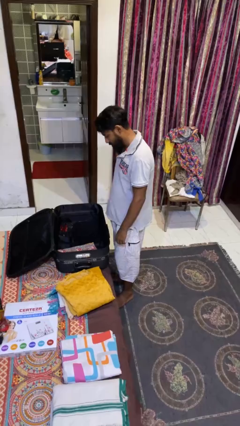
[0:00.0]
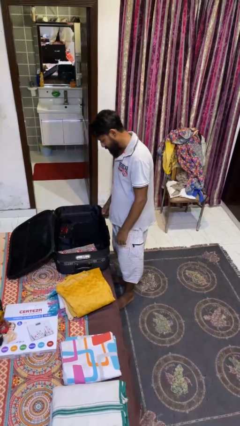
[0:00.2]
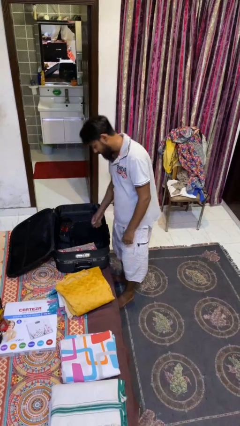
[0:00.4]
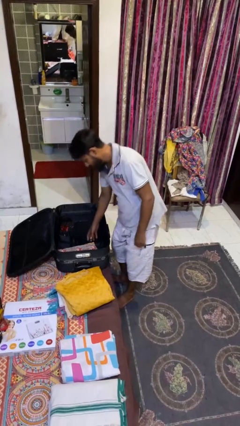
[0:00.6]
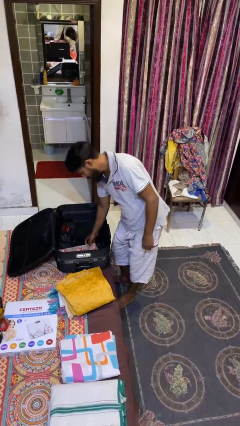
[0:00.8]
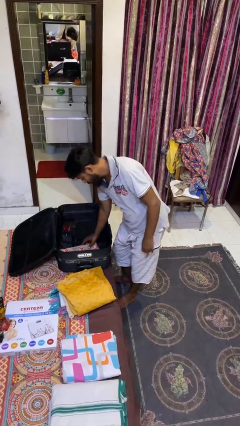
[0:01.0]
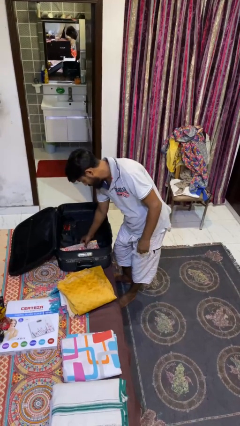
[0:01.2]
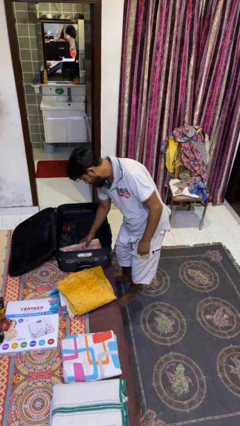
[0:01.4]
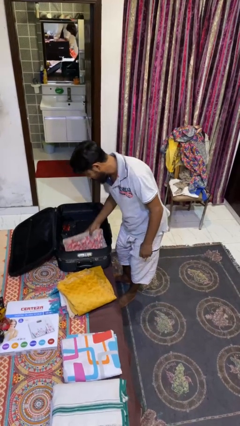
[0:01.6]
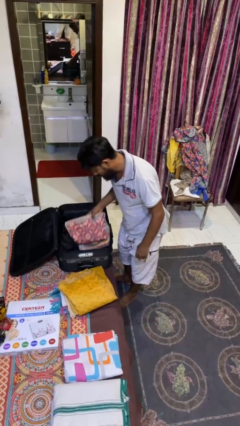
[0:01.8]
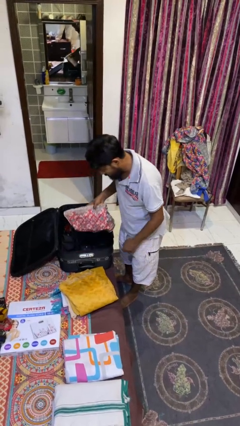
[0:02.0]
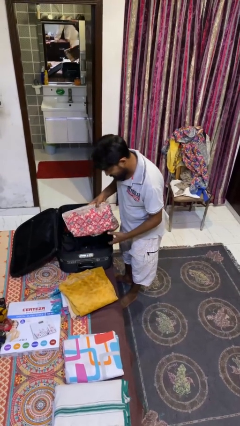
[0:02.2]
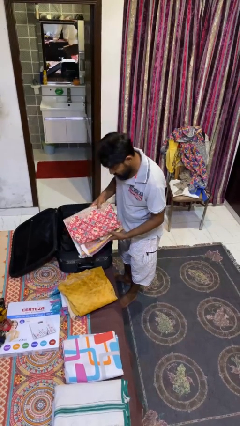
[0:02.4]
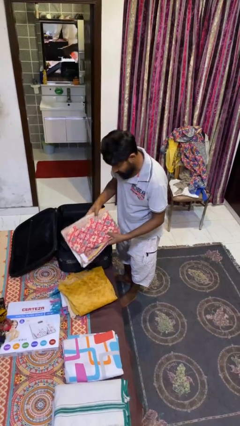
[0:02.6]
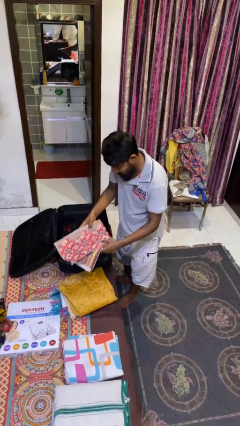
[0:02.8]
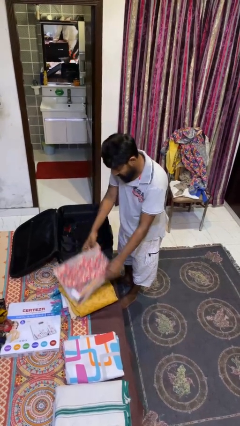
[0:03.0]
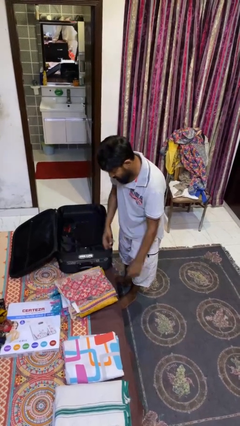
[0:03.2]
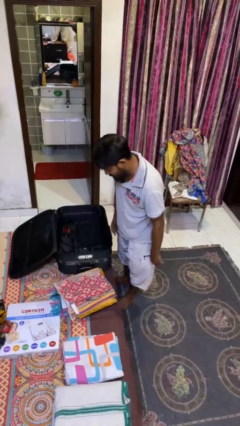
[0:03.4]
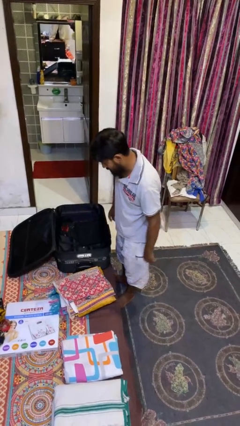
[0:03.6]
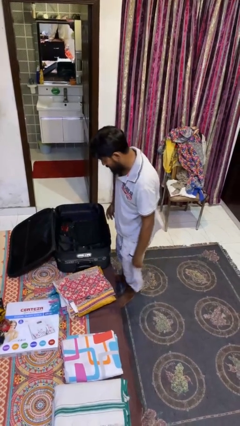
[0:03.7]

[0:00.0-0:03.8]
person unloads clothes from suitcase

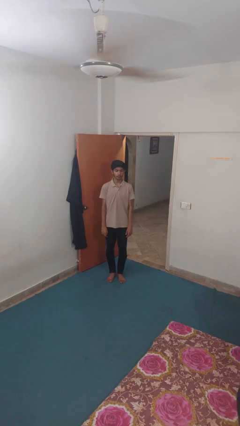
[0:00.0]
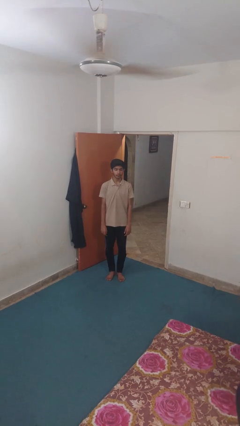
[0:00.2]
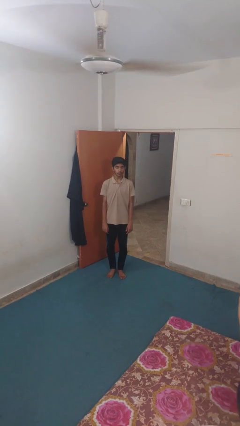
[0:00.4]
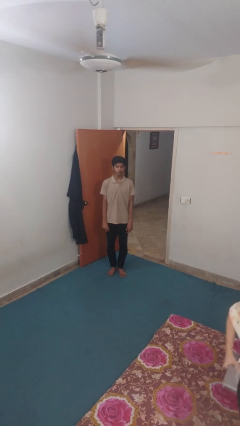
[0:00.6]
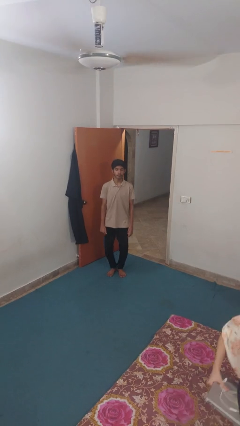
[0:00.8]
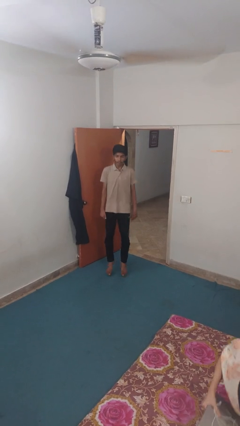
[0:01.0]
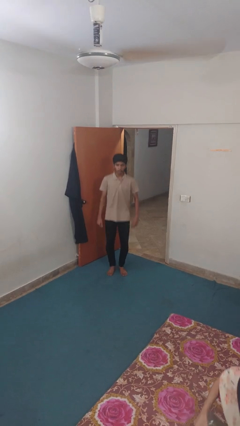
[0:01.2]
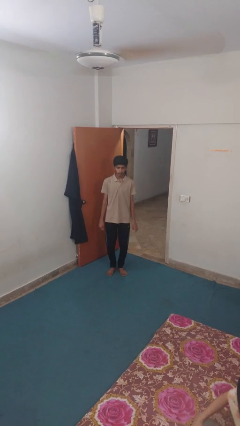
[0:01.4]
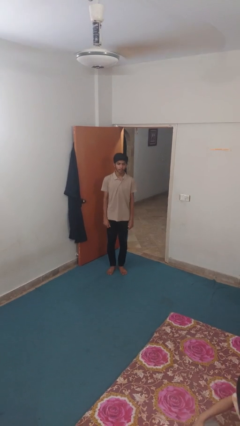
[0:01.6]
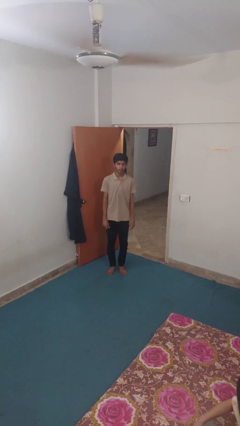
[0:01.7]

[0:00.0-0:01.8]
person jumps

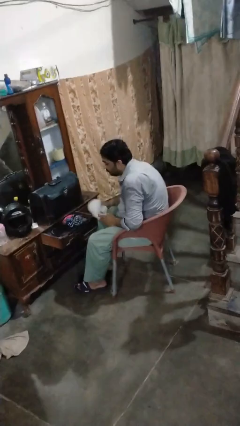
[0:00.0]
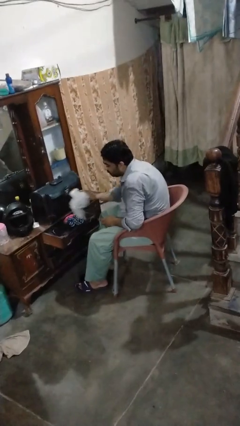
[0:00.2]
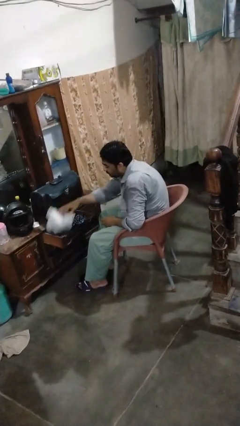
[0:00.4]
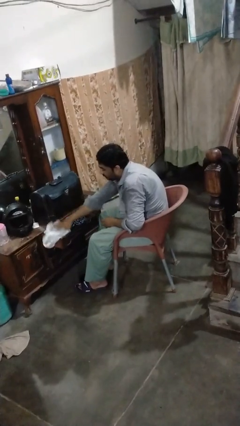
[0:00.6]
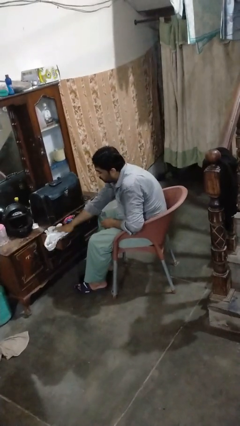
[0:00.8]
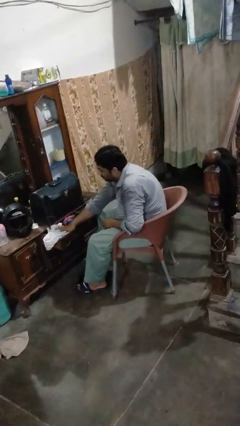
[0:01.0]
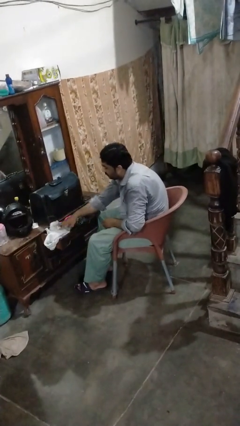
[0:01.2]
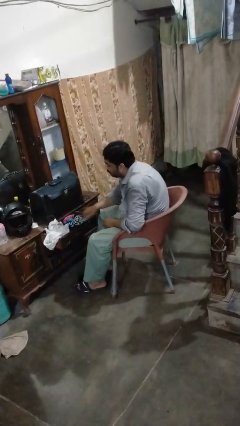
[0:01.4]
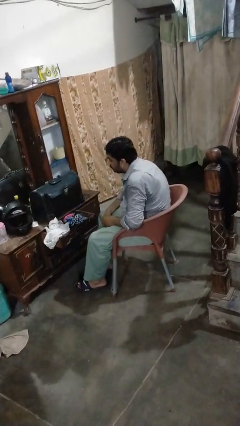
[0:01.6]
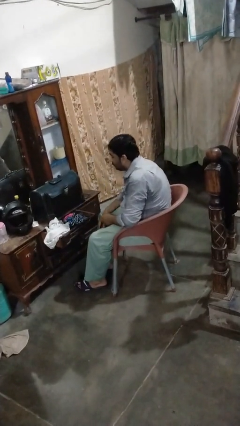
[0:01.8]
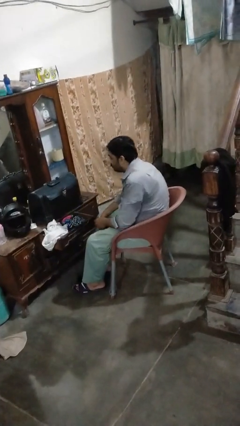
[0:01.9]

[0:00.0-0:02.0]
person puts clothes into dresser

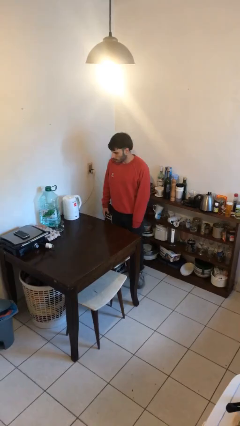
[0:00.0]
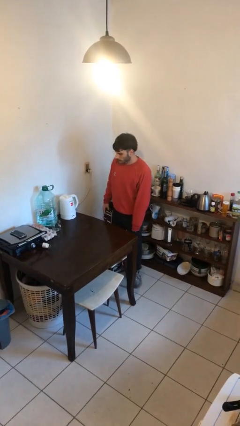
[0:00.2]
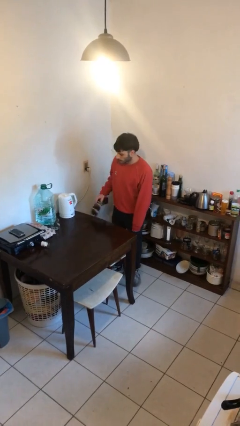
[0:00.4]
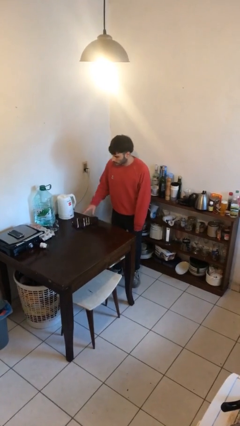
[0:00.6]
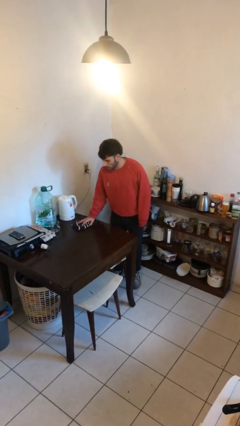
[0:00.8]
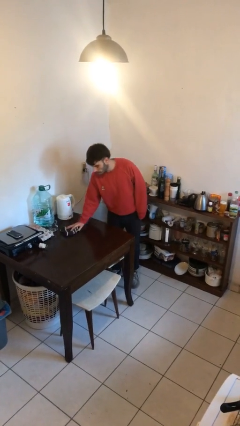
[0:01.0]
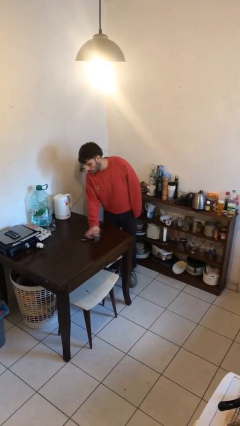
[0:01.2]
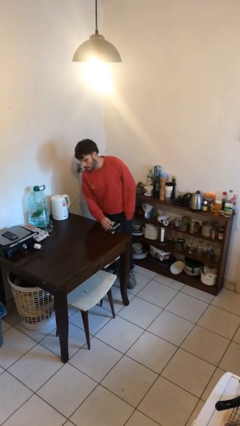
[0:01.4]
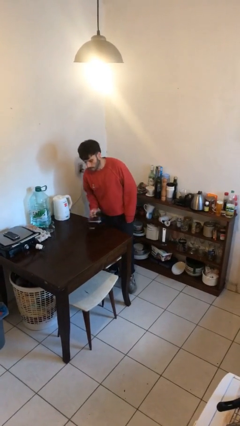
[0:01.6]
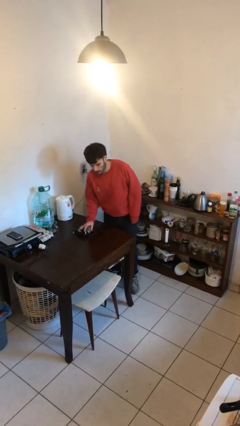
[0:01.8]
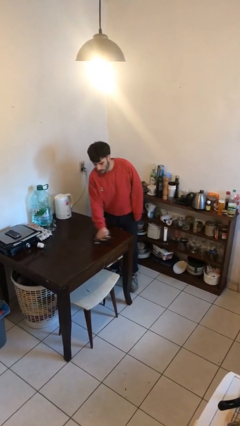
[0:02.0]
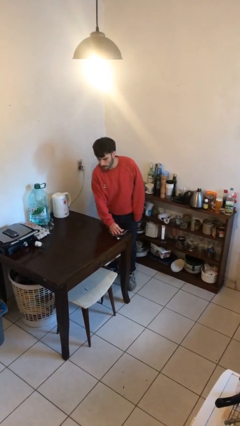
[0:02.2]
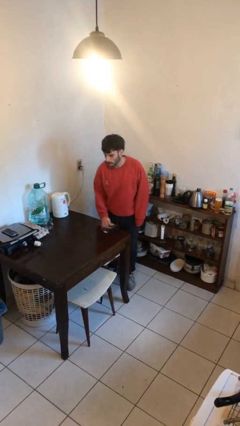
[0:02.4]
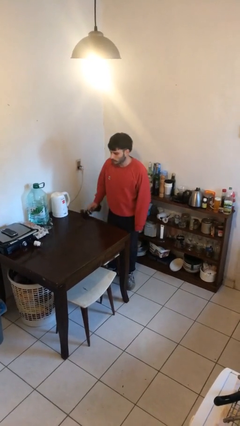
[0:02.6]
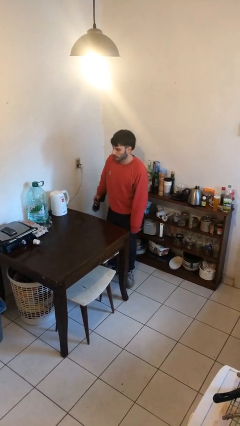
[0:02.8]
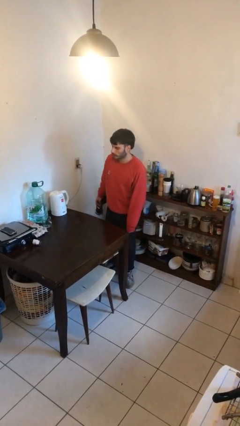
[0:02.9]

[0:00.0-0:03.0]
person cleans table with rag

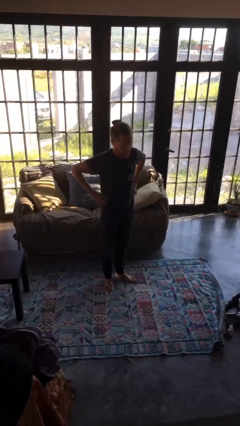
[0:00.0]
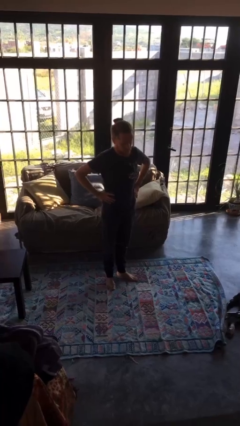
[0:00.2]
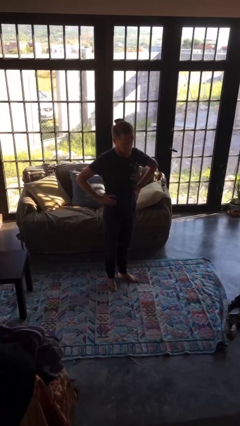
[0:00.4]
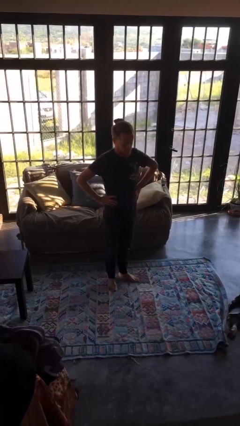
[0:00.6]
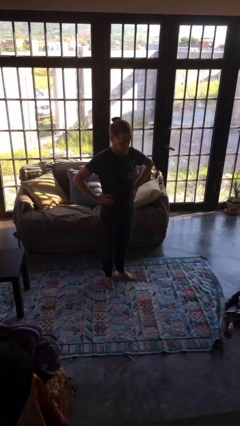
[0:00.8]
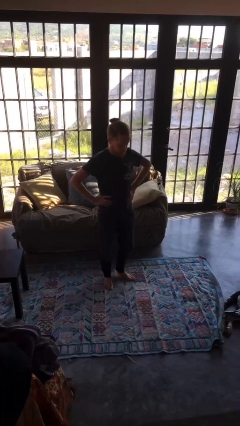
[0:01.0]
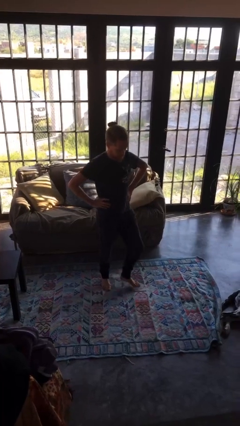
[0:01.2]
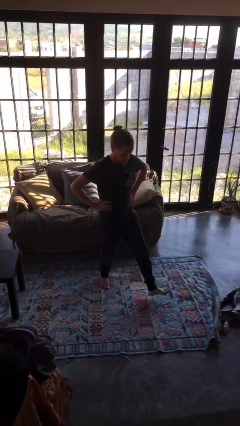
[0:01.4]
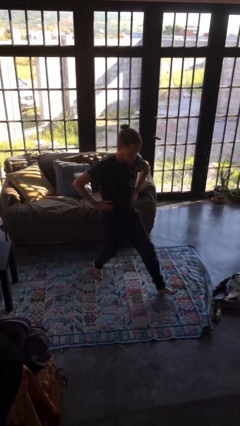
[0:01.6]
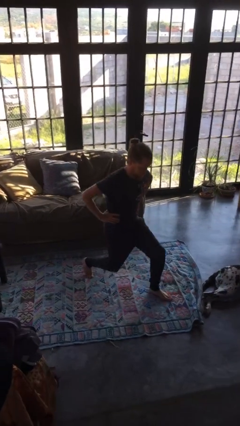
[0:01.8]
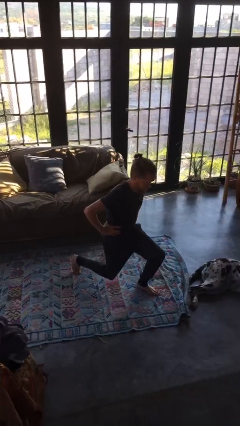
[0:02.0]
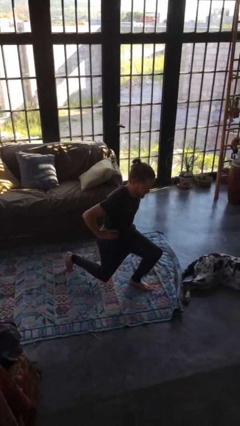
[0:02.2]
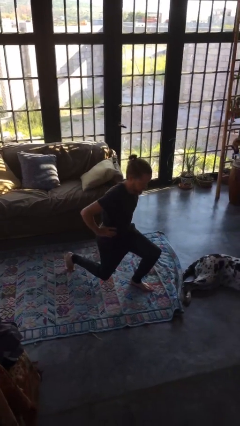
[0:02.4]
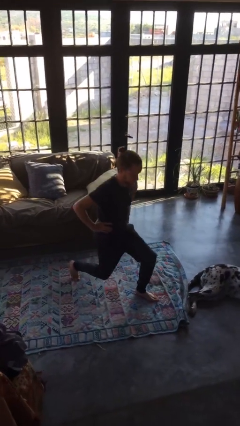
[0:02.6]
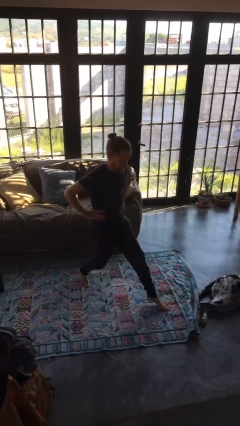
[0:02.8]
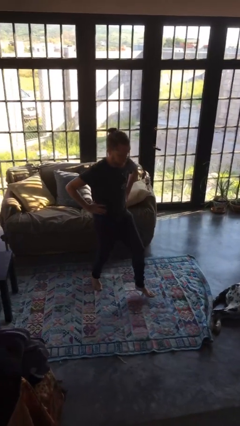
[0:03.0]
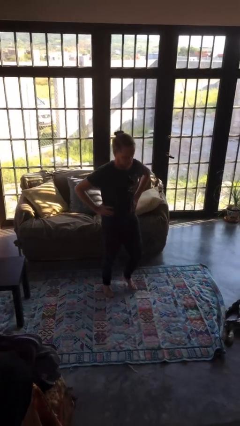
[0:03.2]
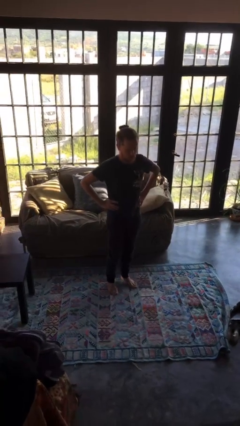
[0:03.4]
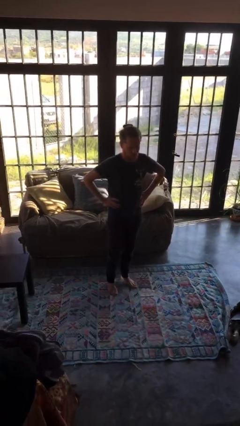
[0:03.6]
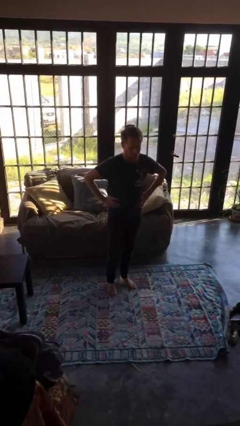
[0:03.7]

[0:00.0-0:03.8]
person exercises with lunges

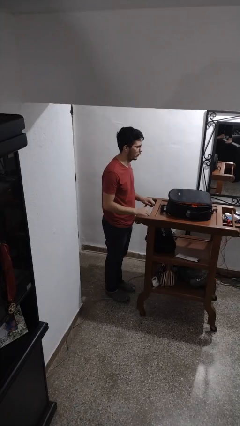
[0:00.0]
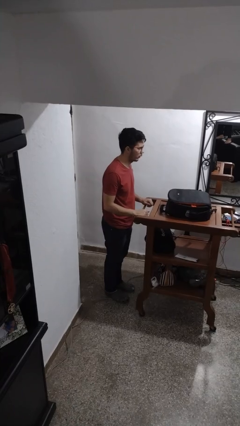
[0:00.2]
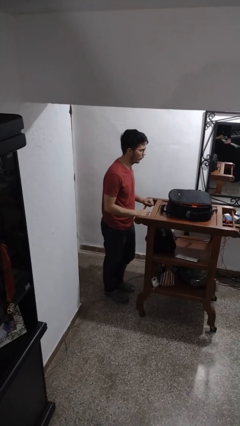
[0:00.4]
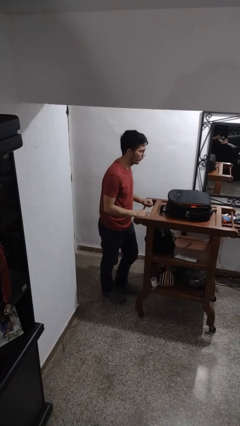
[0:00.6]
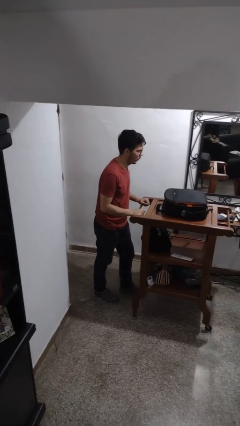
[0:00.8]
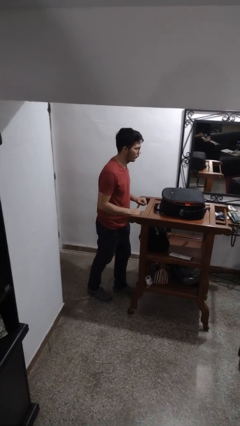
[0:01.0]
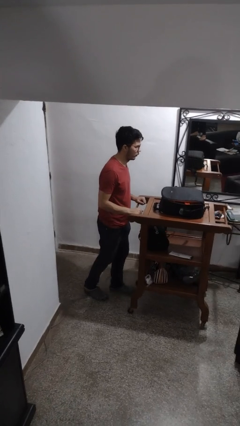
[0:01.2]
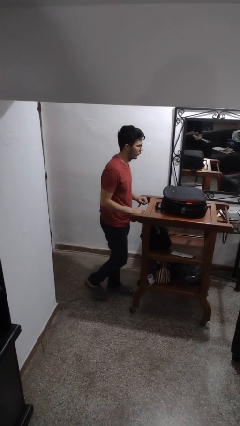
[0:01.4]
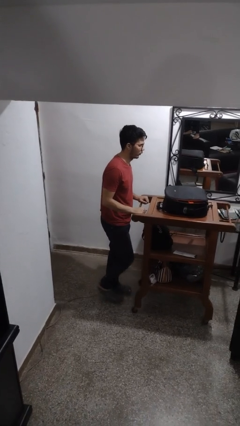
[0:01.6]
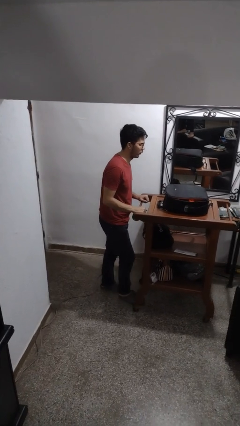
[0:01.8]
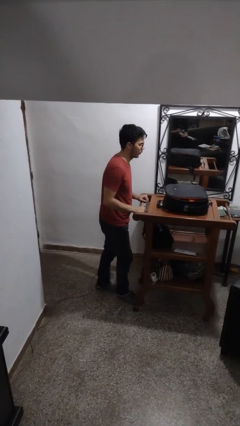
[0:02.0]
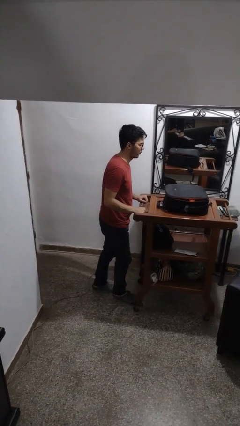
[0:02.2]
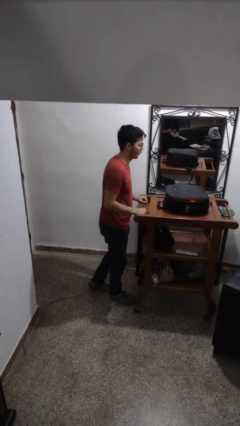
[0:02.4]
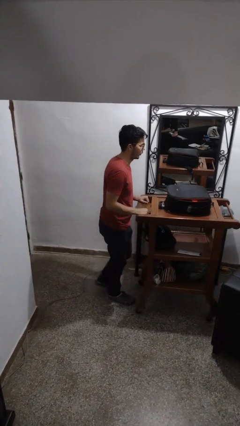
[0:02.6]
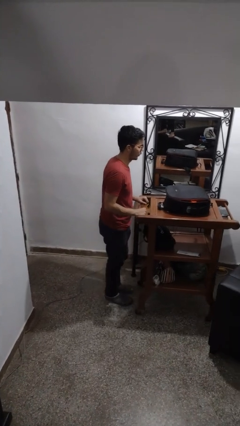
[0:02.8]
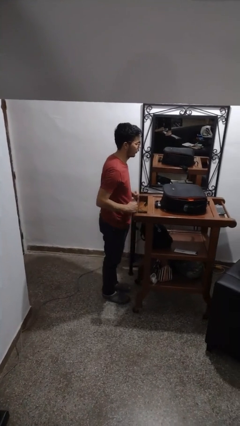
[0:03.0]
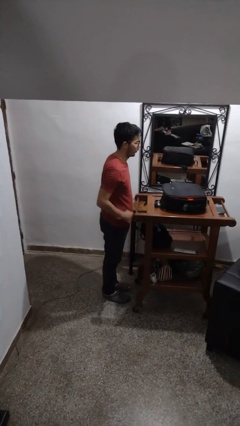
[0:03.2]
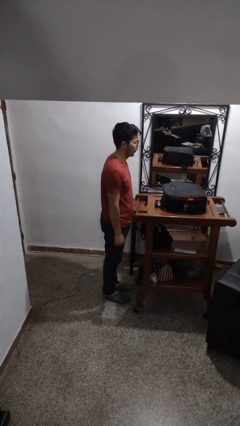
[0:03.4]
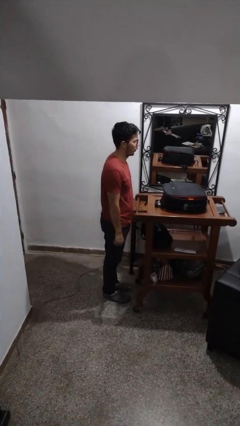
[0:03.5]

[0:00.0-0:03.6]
person pushes wheeled cart
